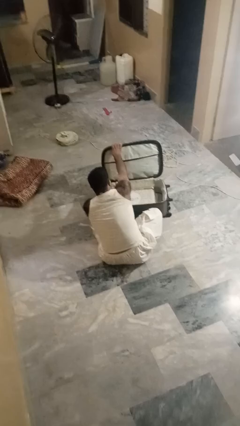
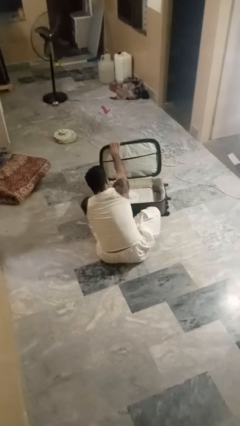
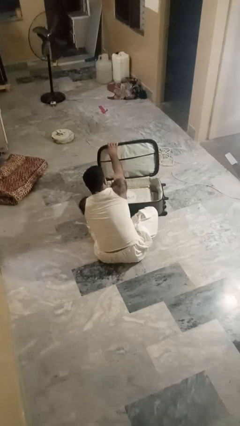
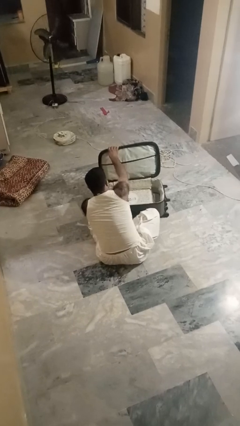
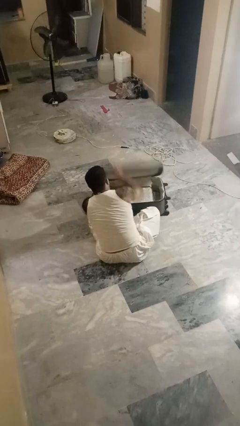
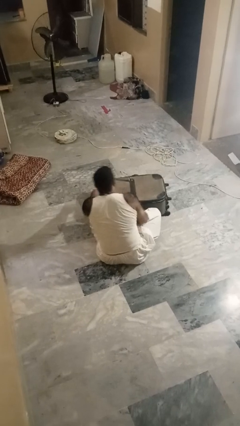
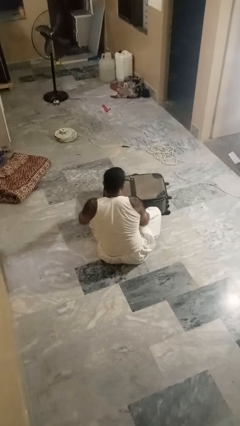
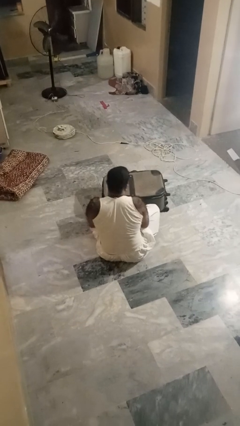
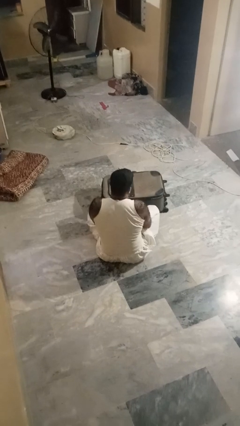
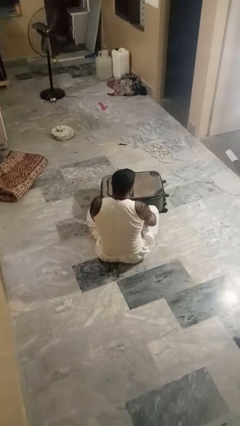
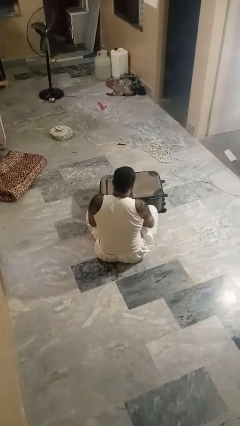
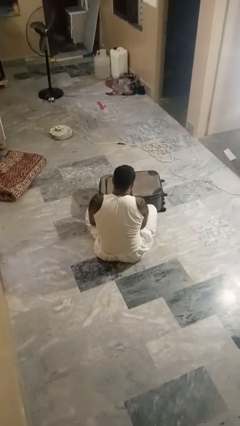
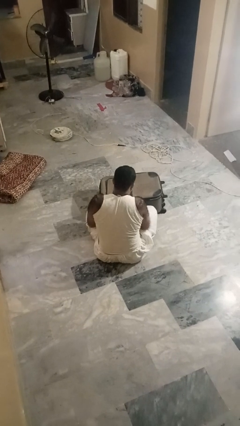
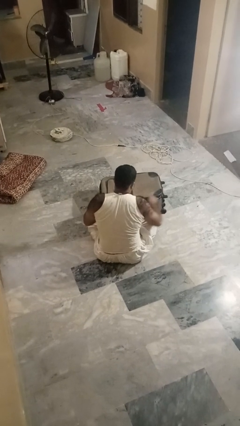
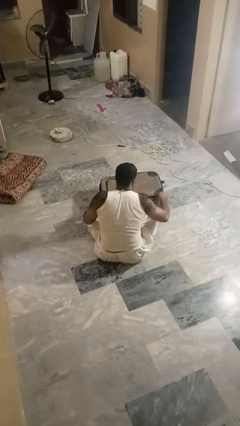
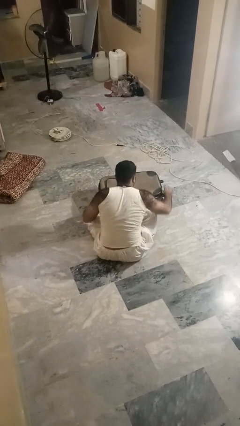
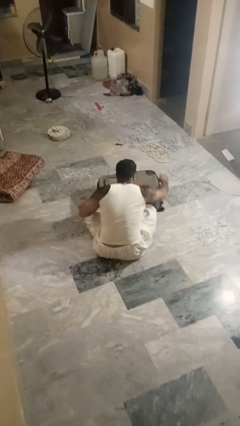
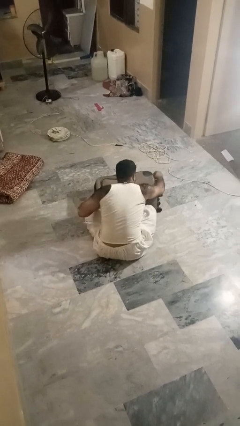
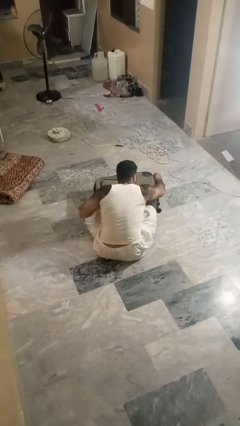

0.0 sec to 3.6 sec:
person closes suitcase

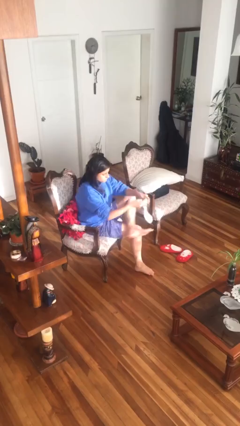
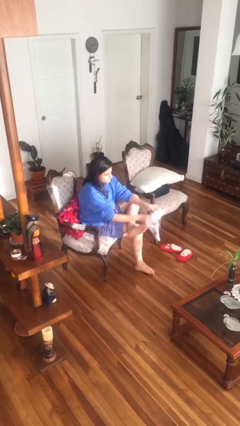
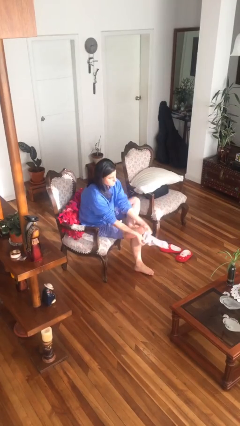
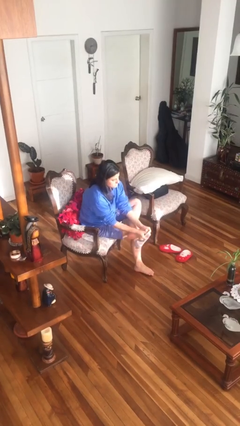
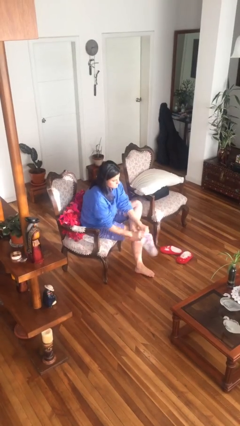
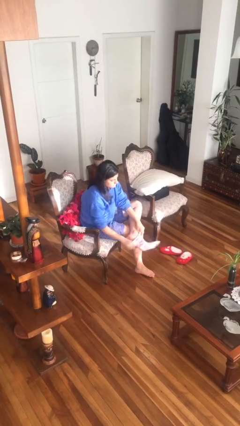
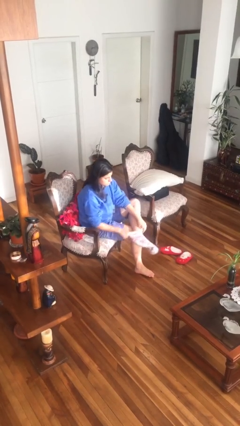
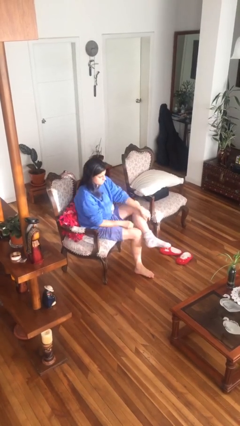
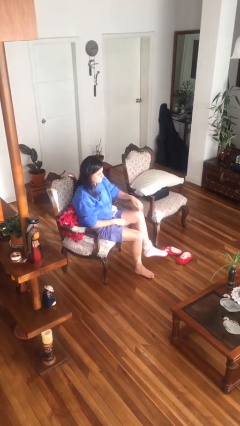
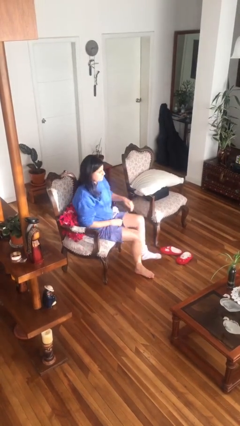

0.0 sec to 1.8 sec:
person puts on socks

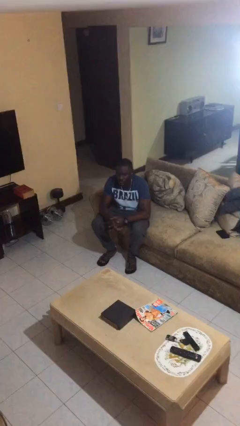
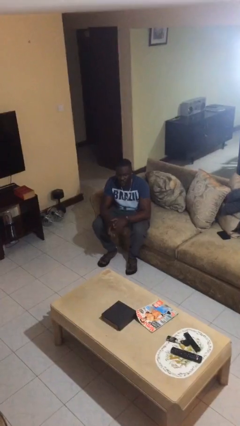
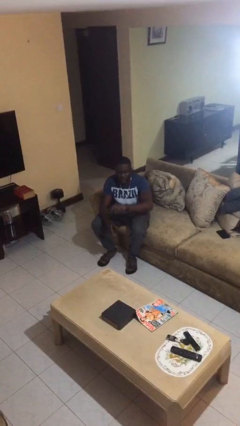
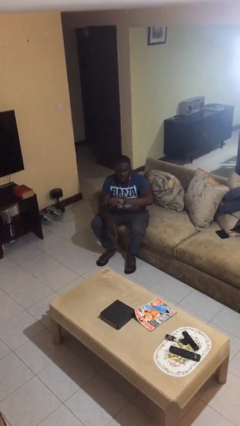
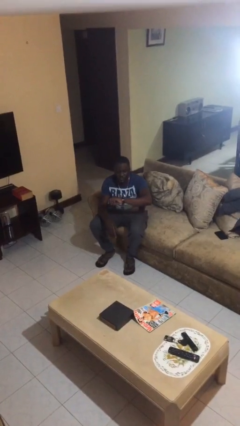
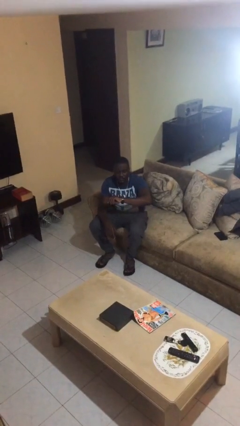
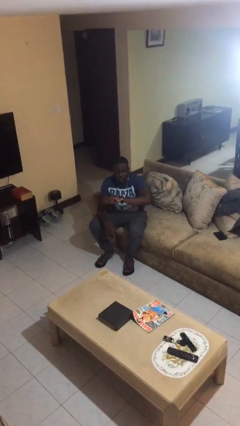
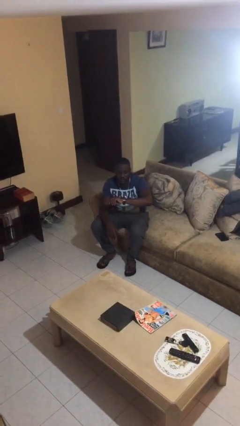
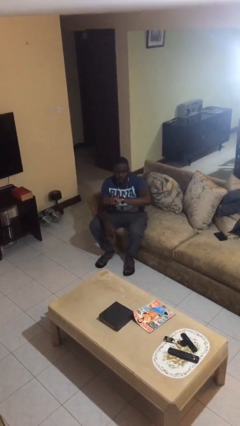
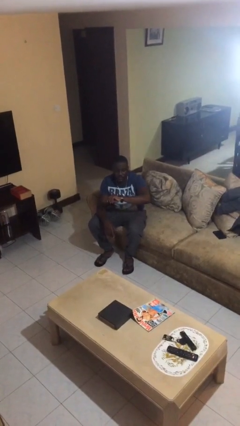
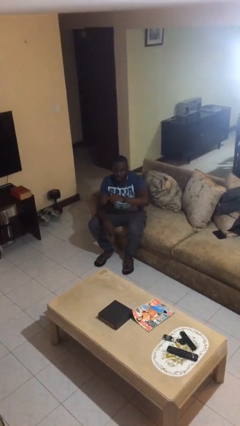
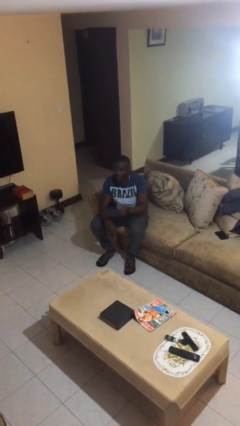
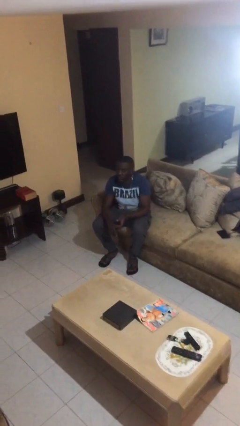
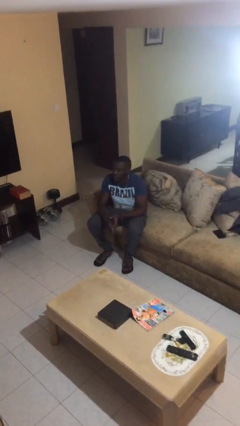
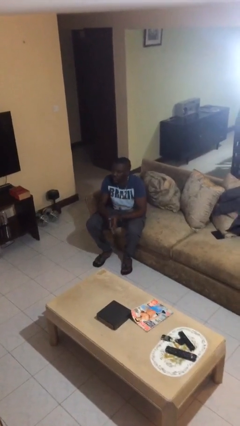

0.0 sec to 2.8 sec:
person looks at wristwatch

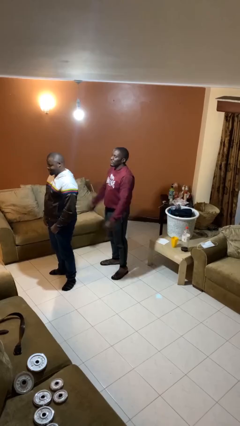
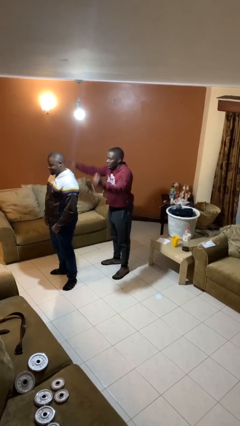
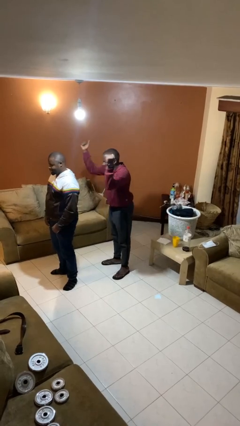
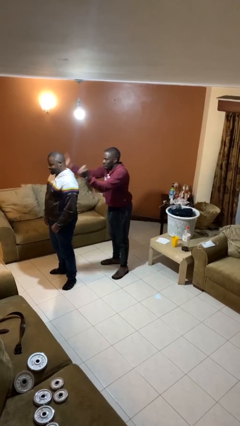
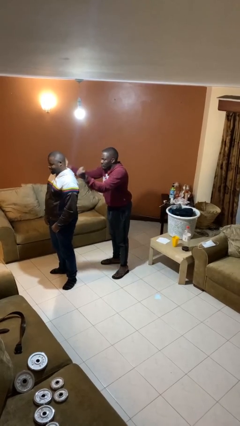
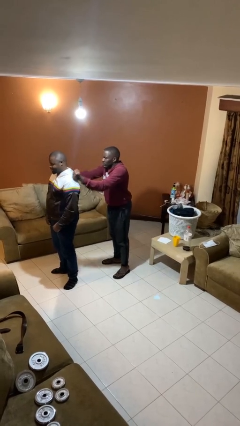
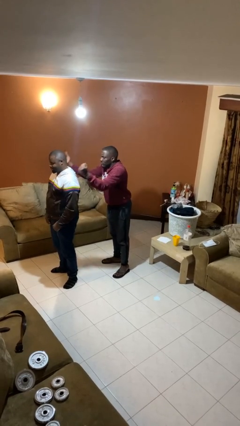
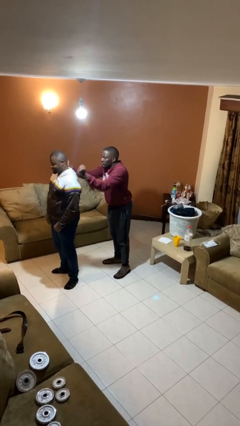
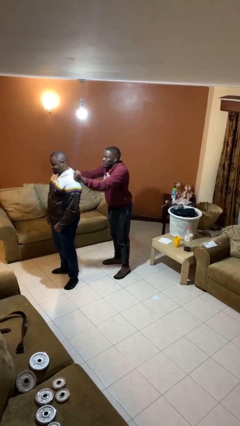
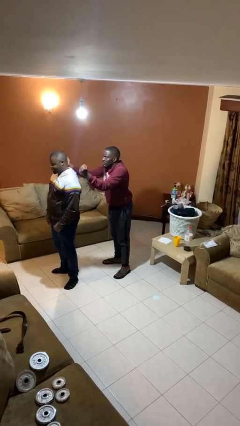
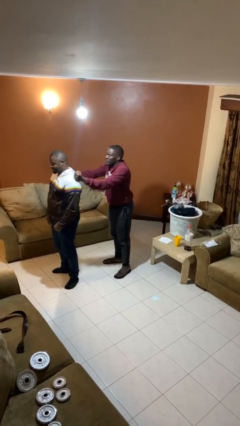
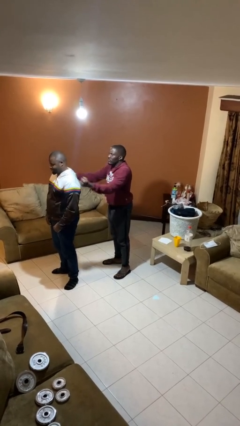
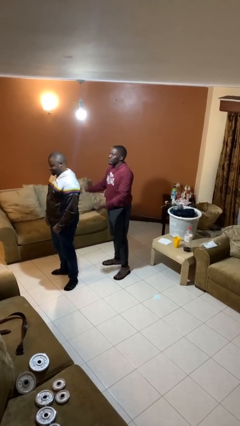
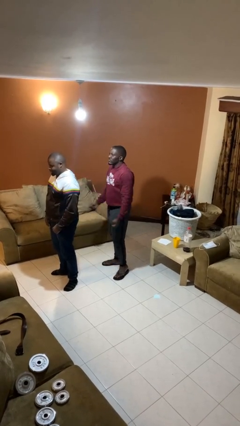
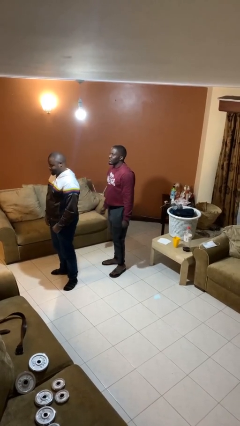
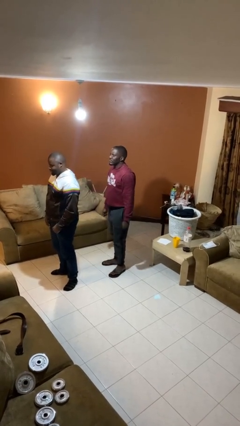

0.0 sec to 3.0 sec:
person pounds shoulders of person

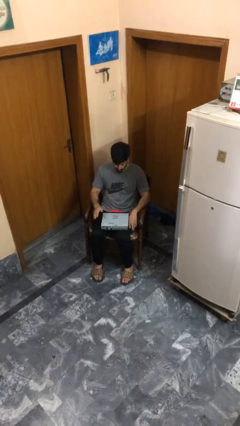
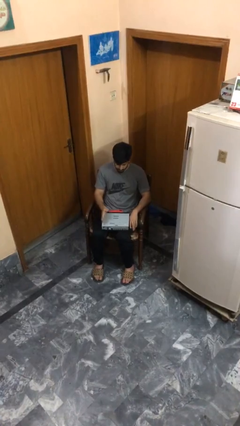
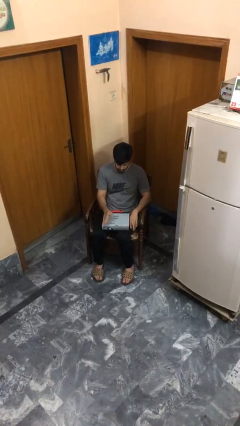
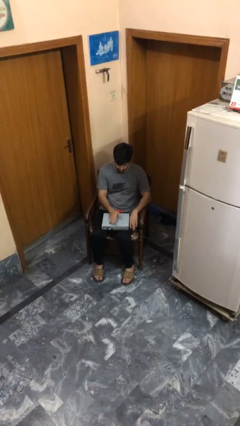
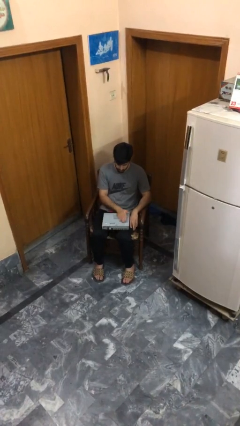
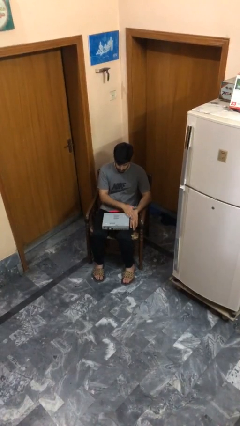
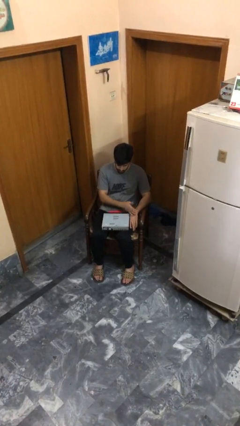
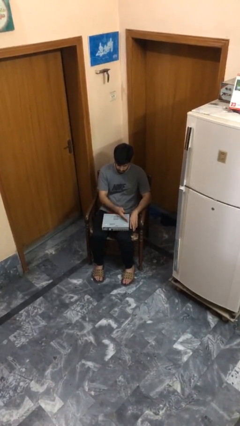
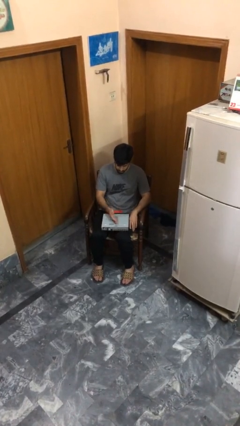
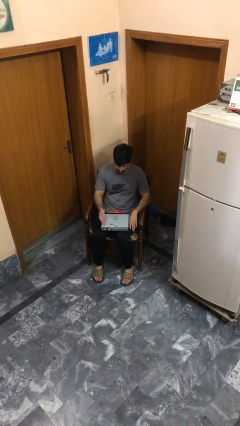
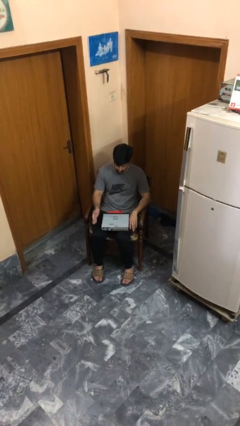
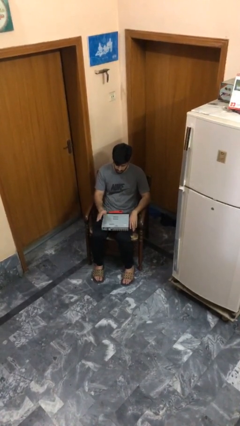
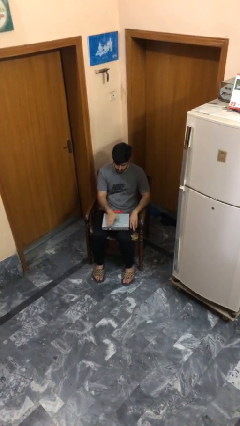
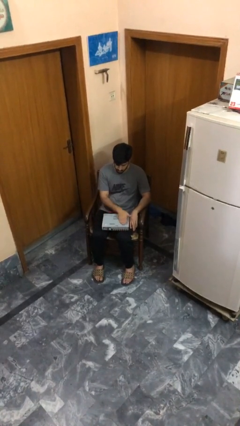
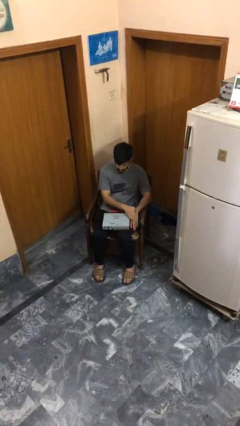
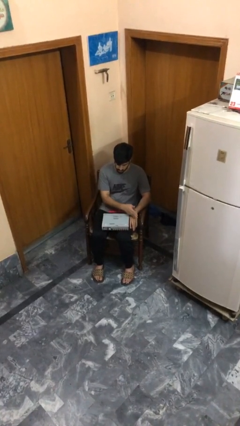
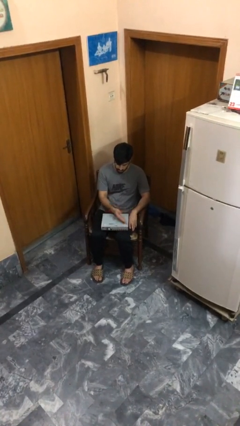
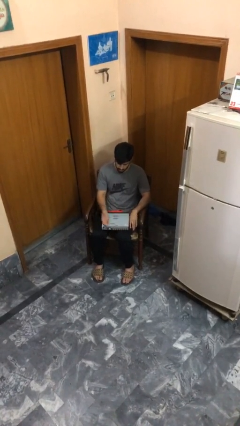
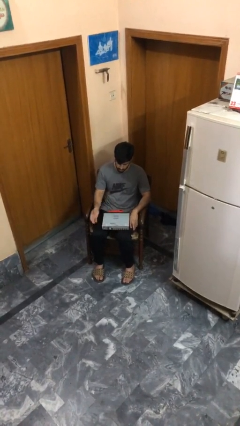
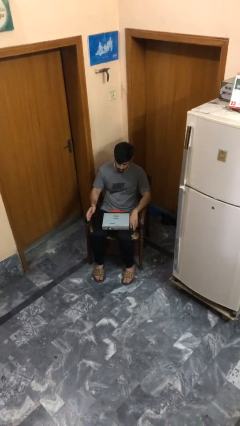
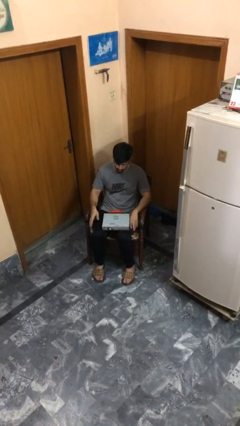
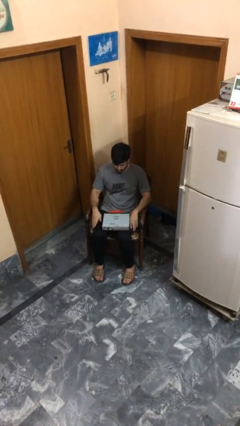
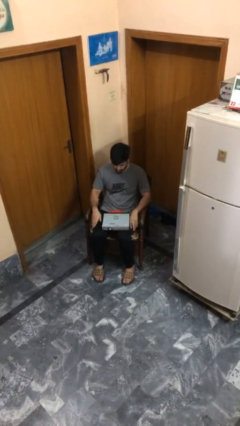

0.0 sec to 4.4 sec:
person waves hand over object

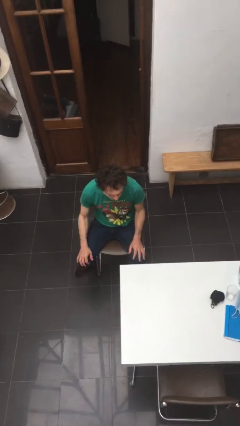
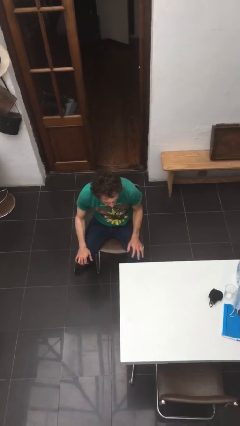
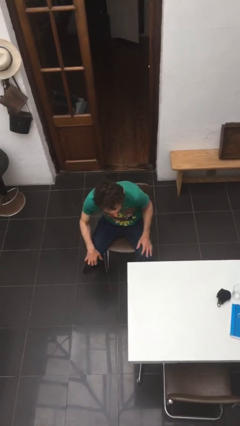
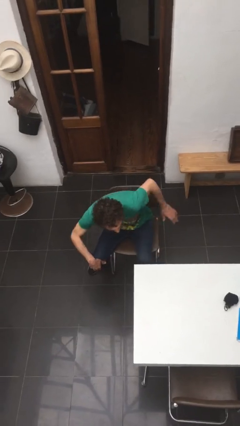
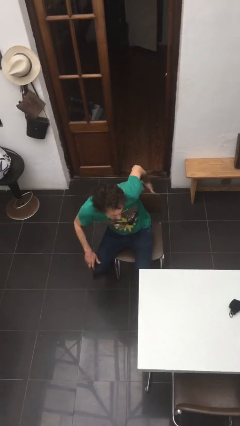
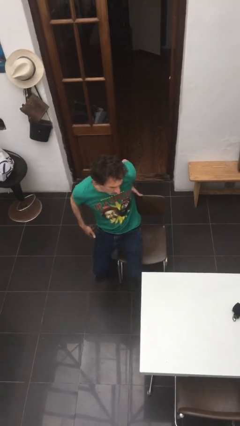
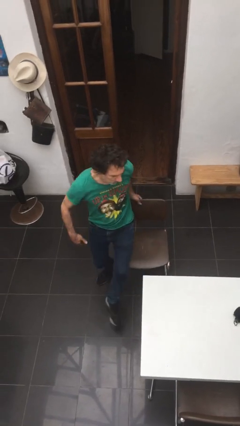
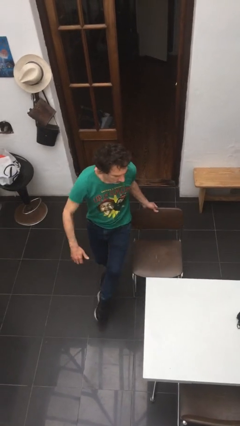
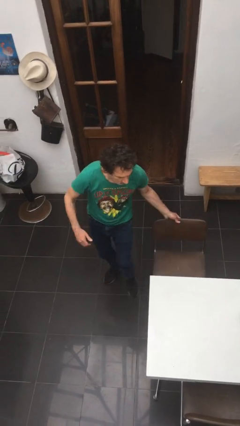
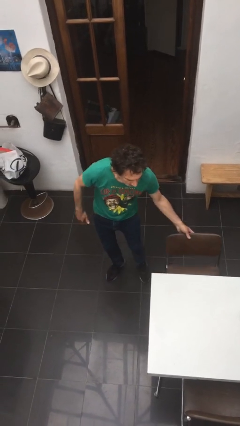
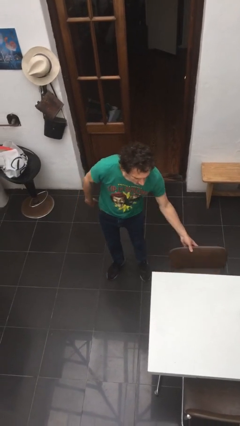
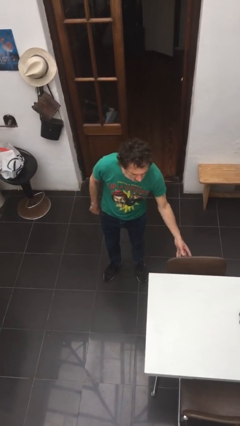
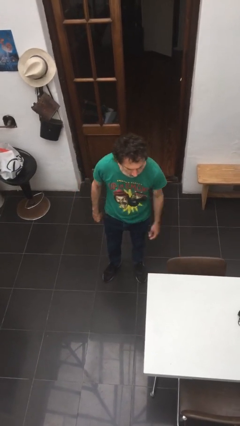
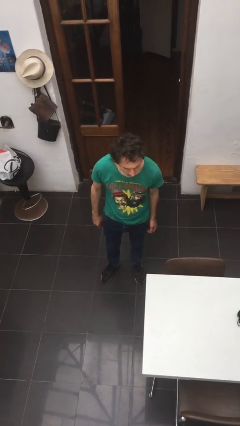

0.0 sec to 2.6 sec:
person stands up
